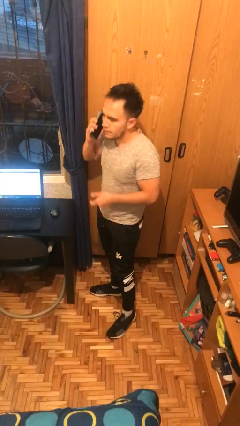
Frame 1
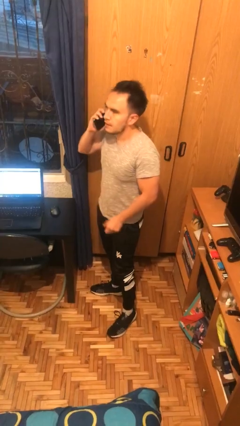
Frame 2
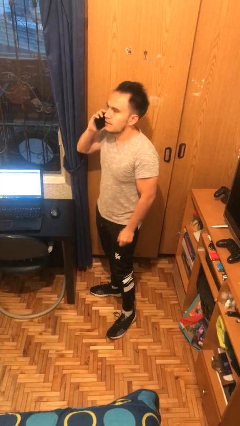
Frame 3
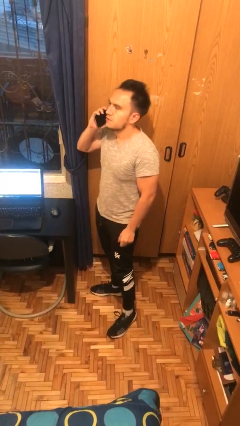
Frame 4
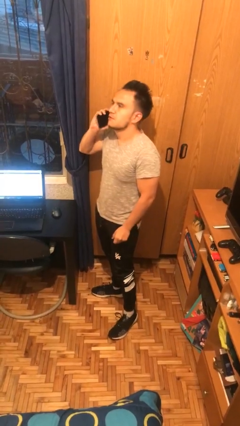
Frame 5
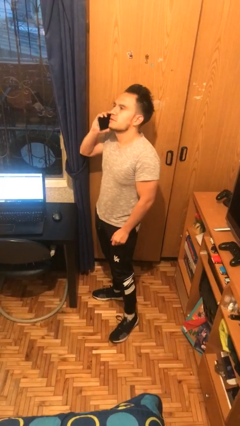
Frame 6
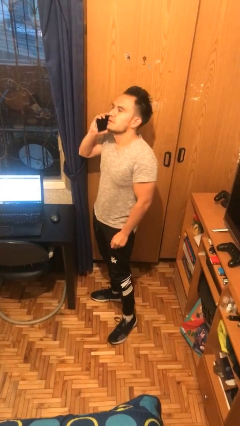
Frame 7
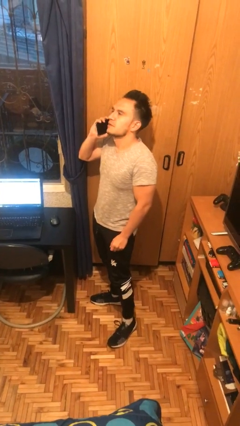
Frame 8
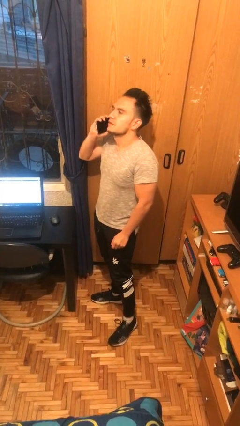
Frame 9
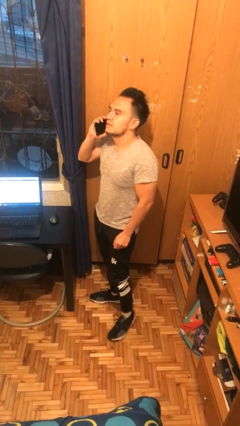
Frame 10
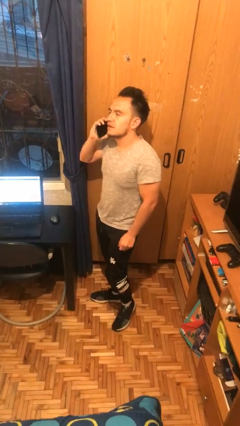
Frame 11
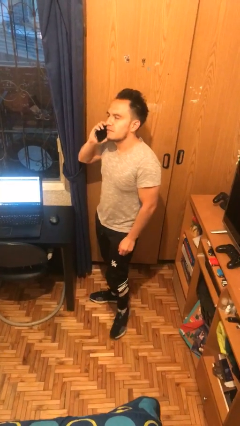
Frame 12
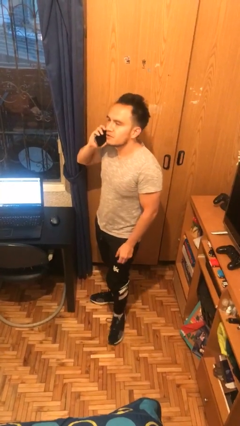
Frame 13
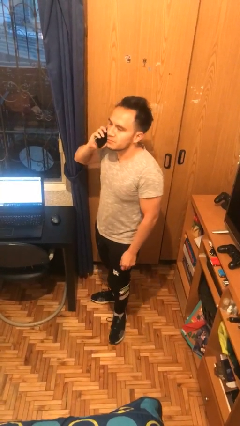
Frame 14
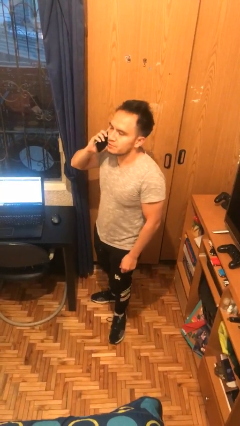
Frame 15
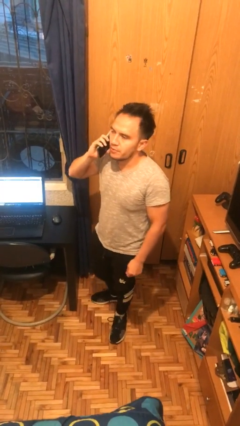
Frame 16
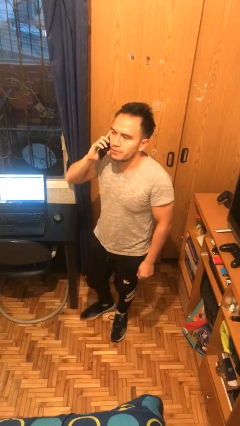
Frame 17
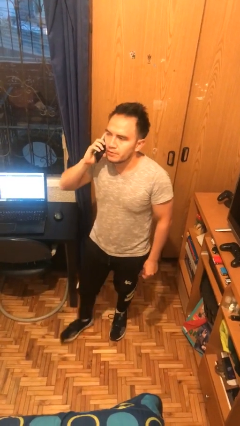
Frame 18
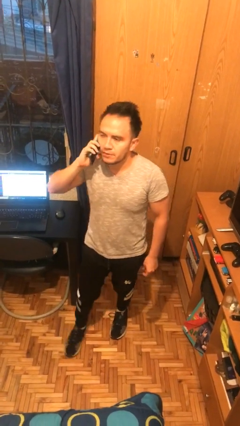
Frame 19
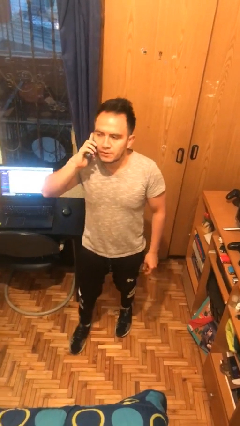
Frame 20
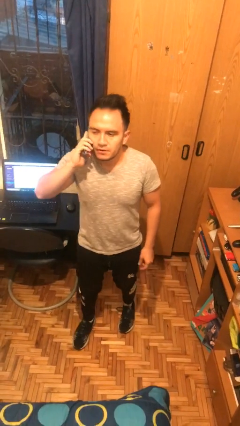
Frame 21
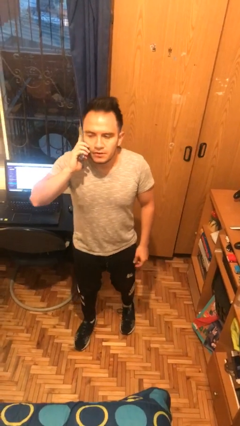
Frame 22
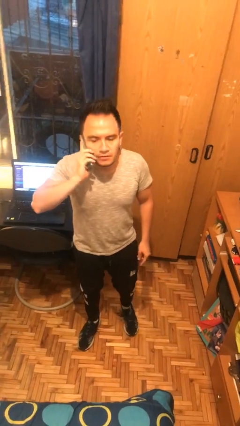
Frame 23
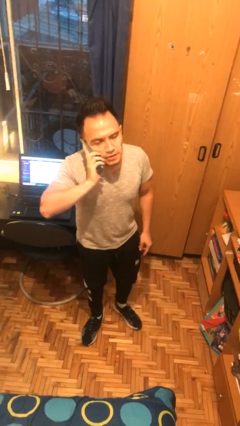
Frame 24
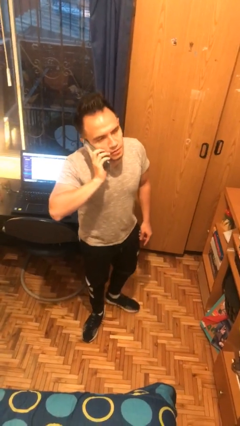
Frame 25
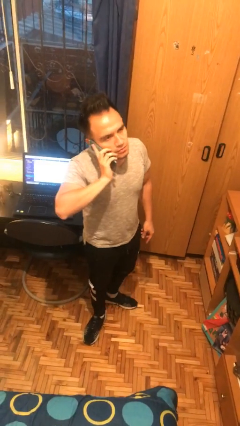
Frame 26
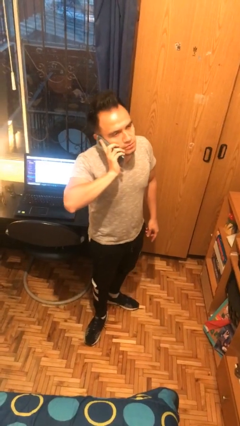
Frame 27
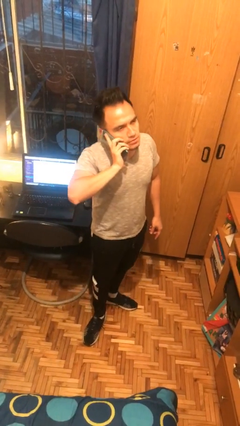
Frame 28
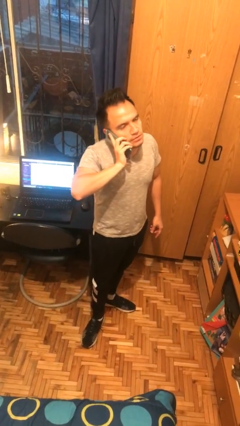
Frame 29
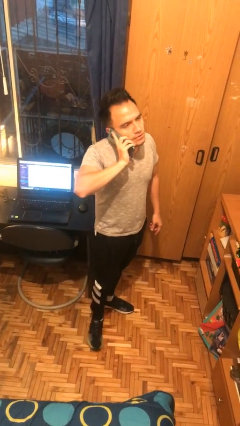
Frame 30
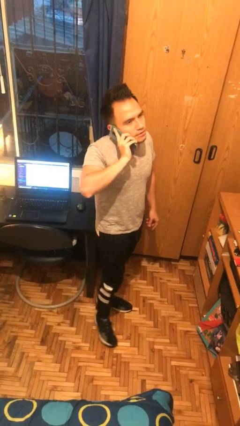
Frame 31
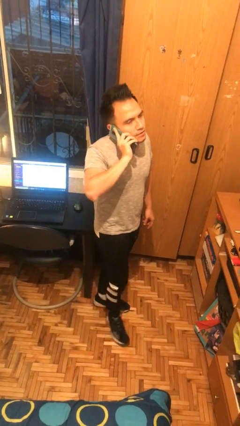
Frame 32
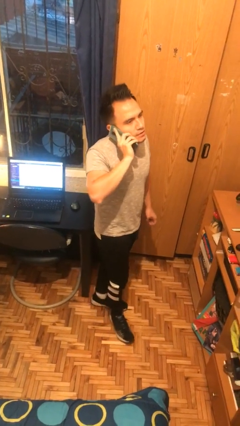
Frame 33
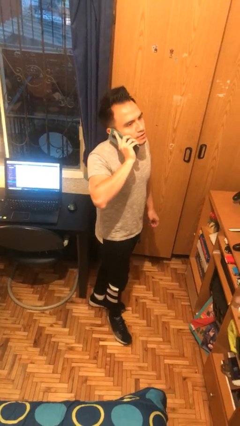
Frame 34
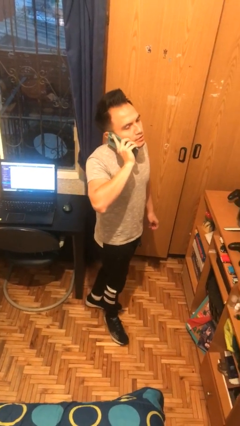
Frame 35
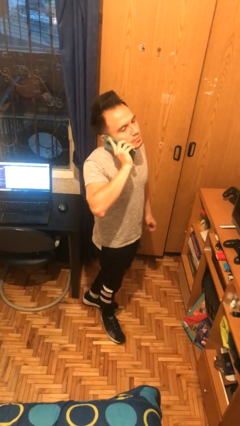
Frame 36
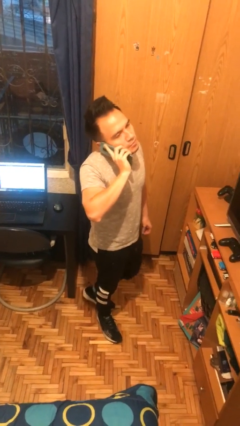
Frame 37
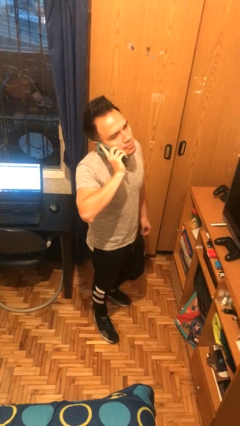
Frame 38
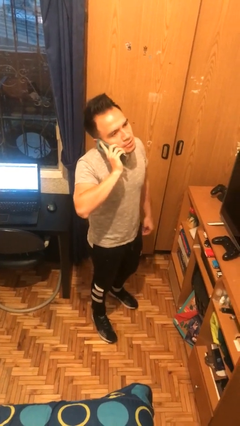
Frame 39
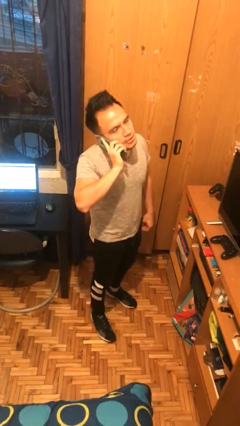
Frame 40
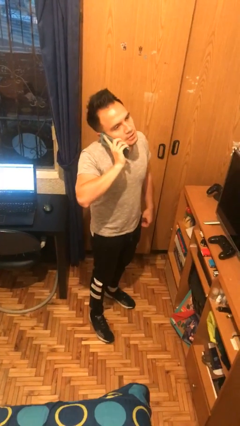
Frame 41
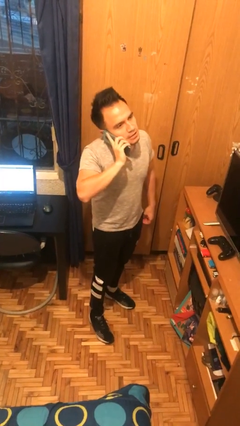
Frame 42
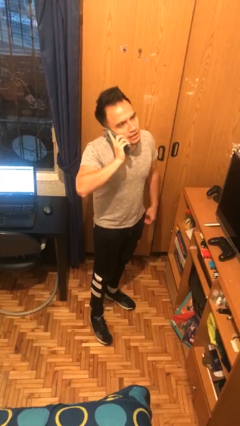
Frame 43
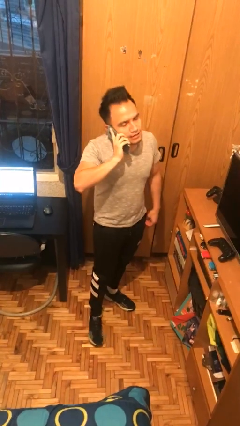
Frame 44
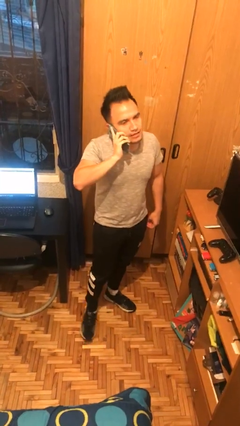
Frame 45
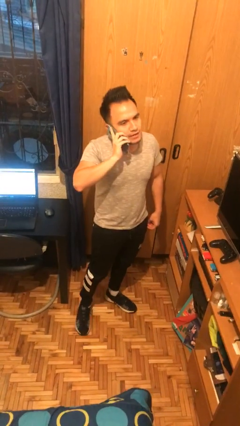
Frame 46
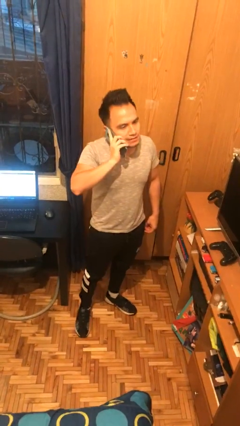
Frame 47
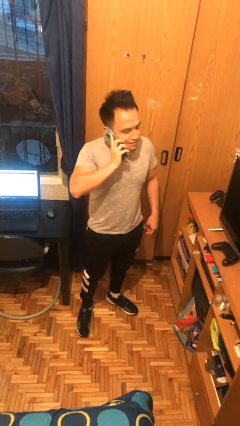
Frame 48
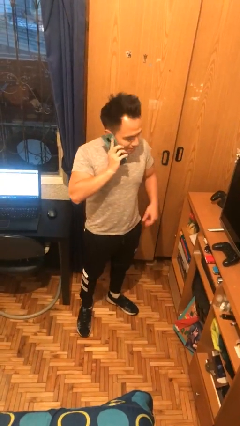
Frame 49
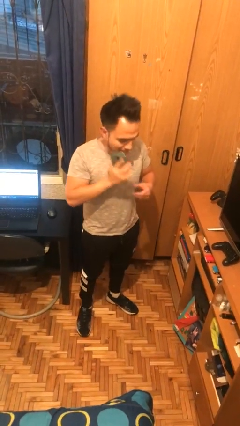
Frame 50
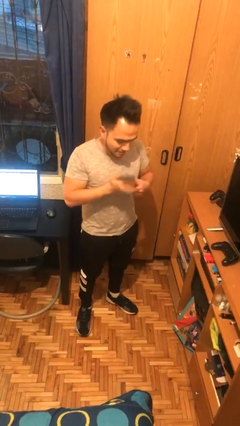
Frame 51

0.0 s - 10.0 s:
person talks on phone

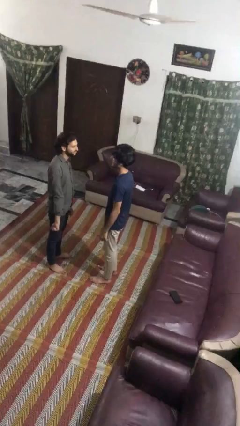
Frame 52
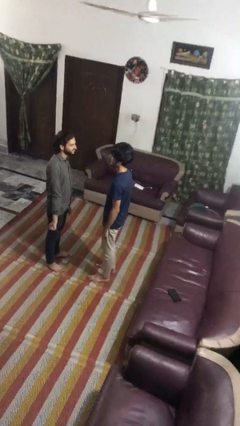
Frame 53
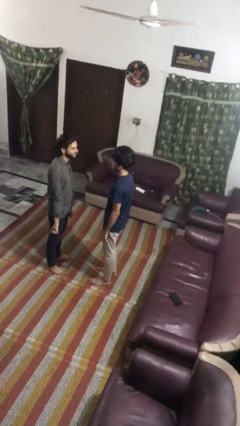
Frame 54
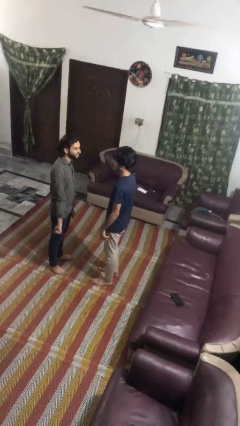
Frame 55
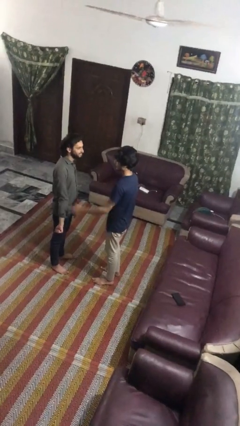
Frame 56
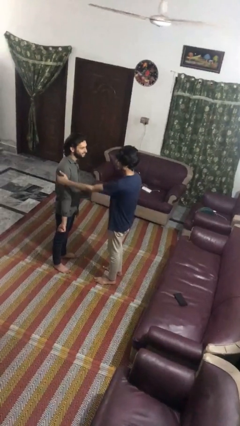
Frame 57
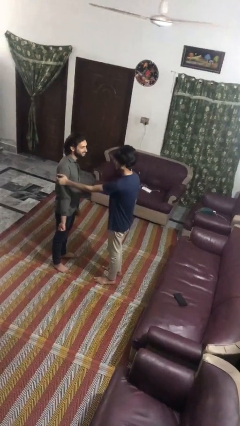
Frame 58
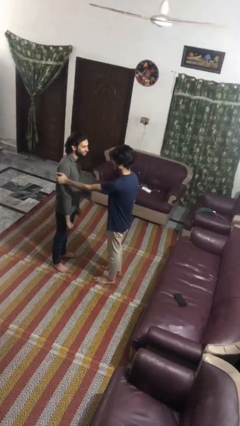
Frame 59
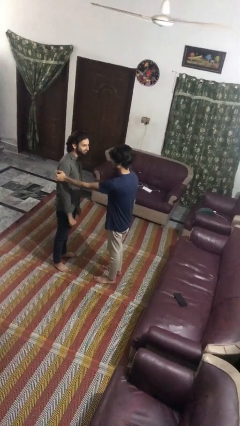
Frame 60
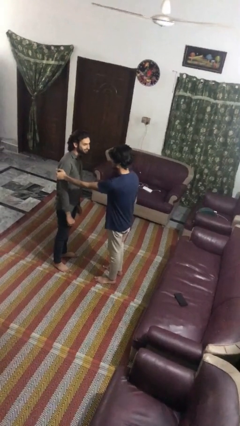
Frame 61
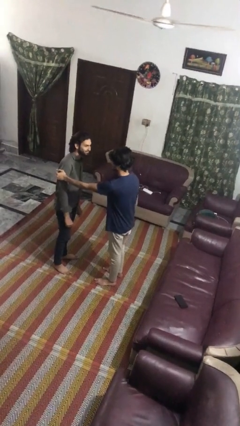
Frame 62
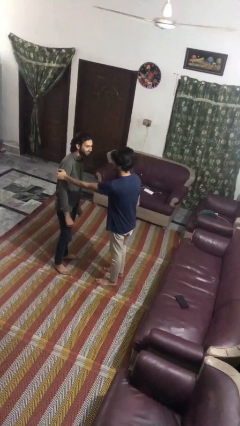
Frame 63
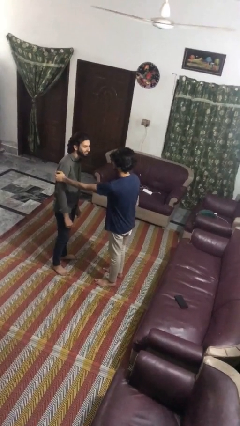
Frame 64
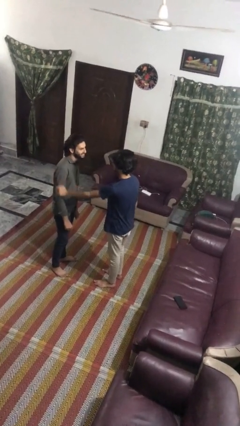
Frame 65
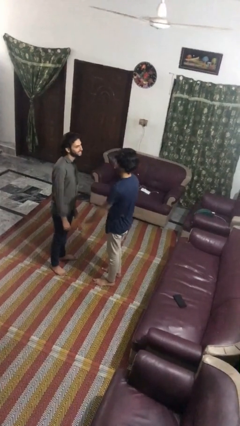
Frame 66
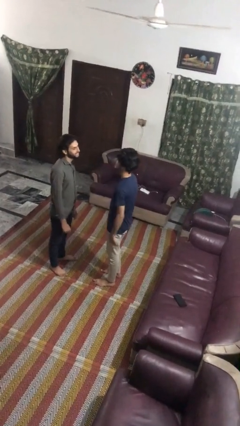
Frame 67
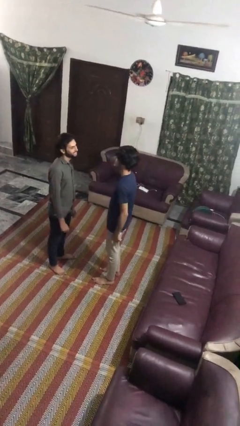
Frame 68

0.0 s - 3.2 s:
person grabs person by bicep

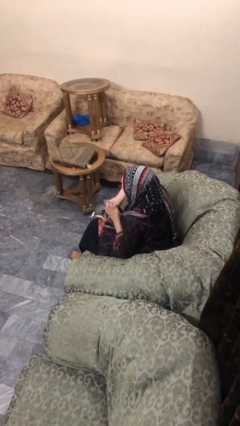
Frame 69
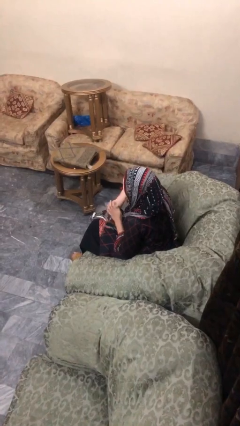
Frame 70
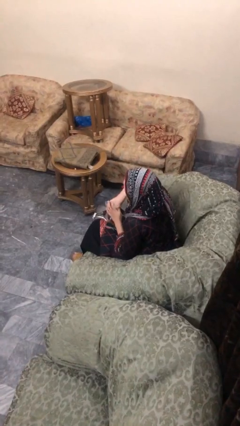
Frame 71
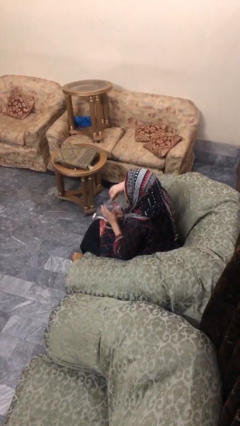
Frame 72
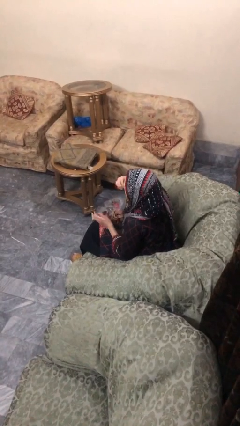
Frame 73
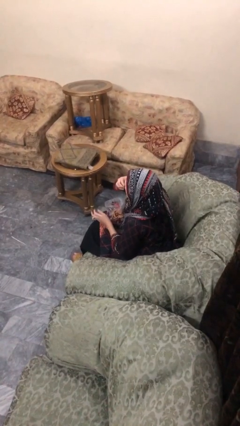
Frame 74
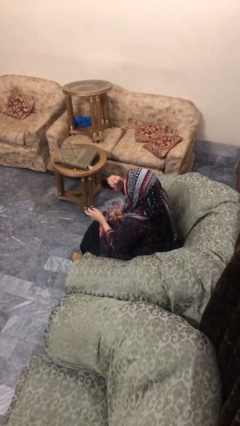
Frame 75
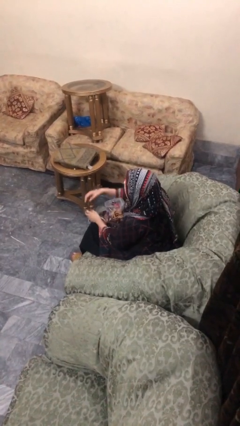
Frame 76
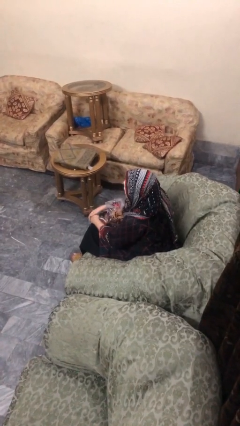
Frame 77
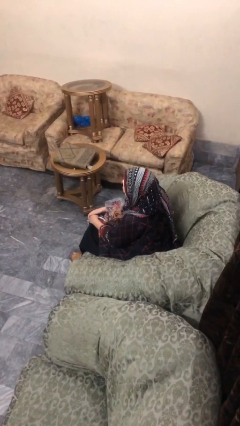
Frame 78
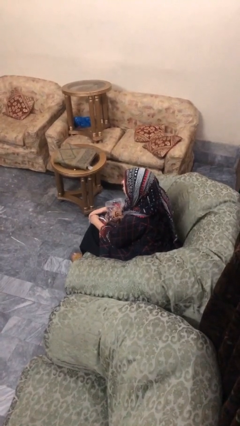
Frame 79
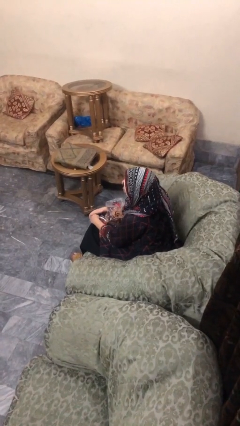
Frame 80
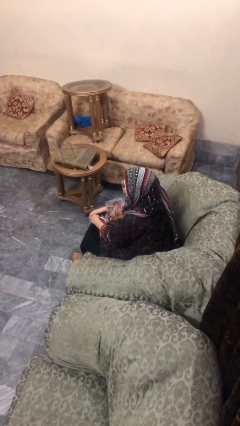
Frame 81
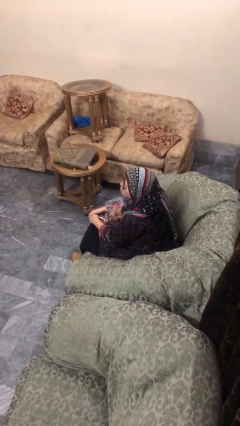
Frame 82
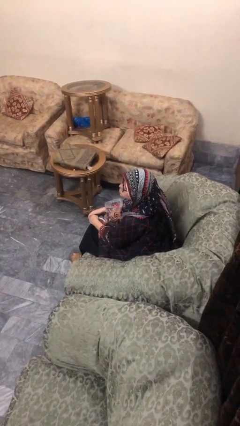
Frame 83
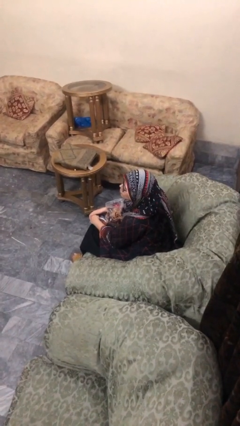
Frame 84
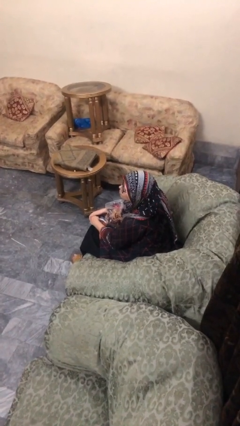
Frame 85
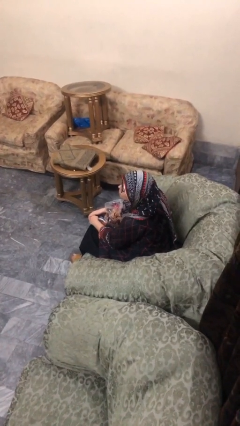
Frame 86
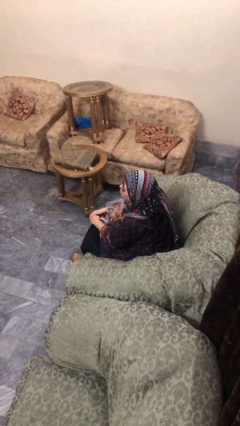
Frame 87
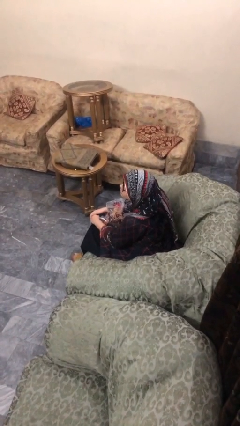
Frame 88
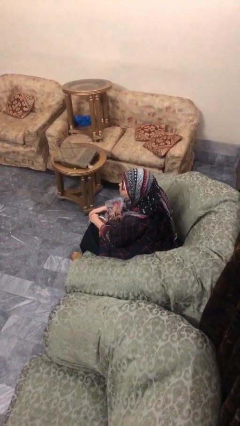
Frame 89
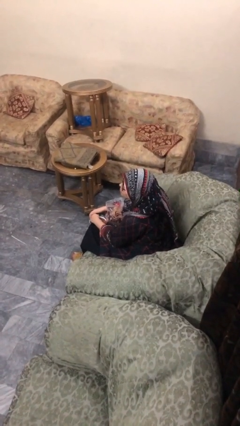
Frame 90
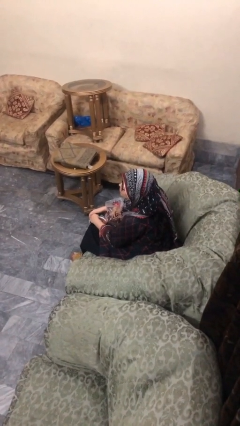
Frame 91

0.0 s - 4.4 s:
person eats snack from bag

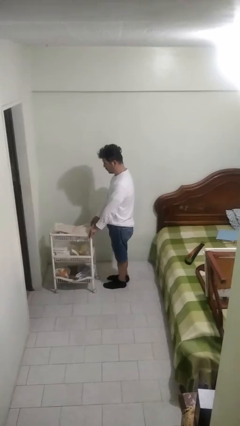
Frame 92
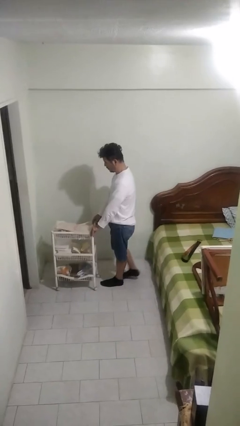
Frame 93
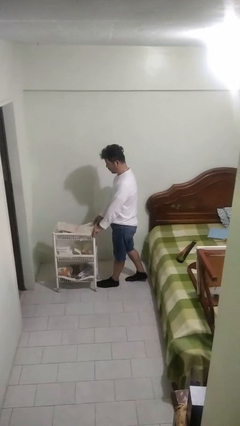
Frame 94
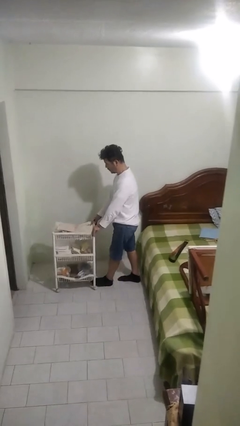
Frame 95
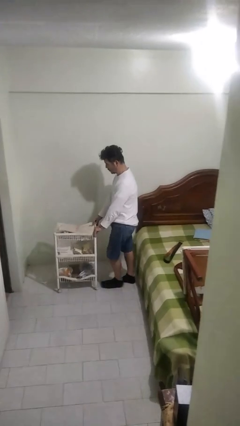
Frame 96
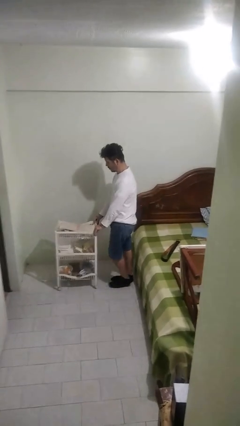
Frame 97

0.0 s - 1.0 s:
person pulls wheeled cart
